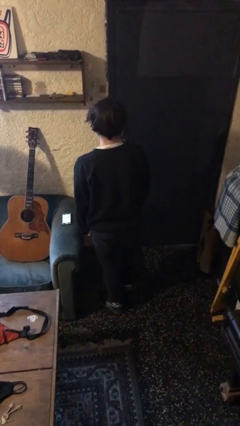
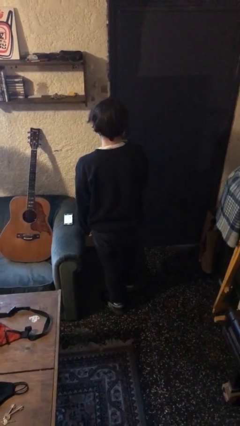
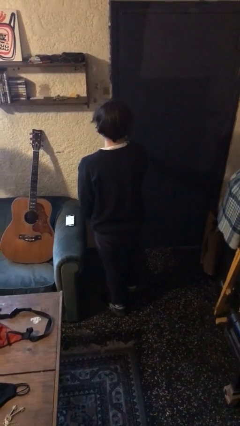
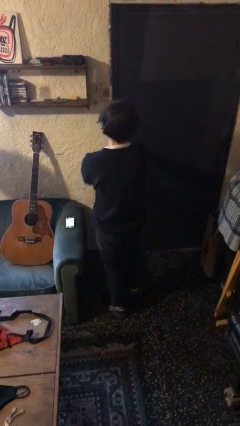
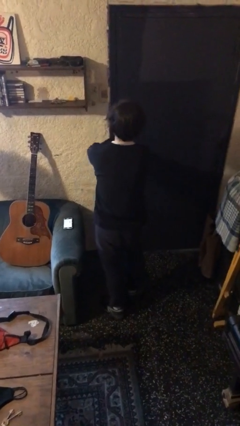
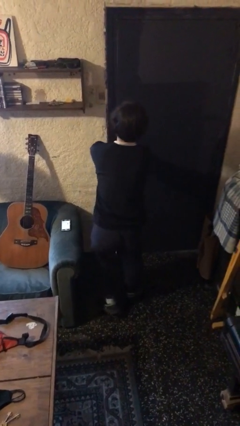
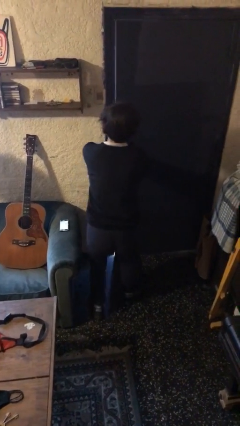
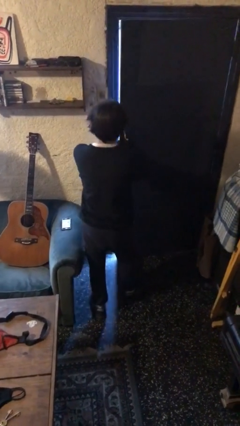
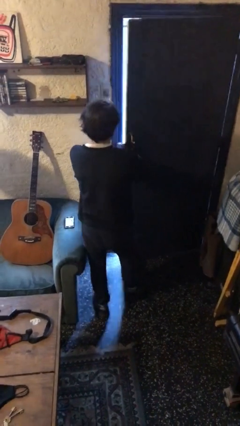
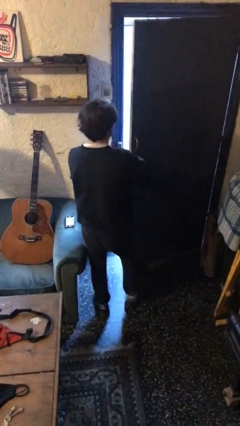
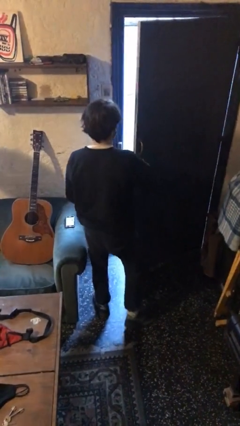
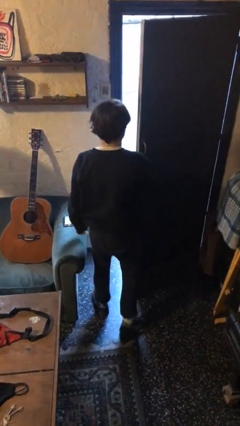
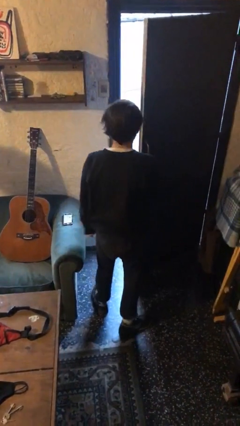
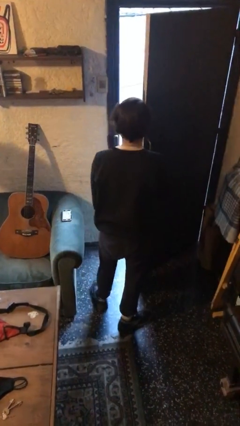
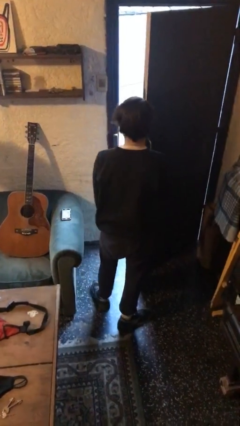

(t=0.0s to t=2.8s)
person opens facility door

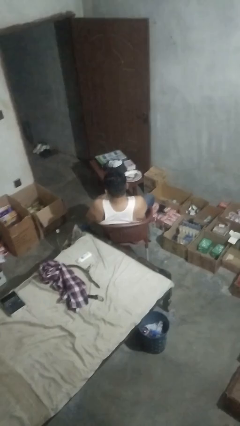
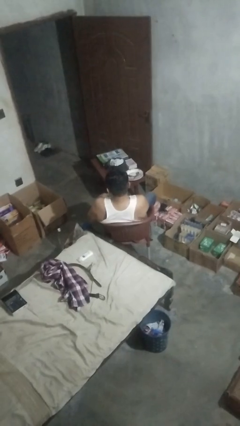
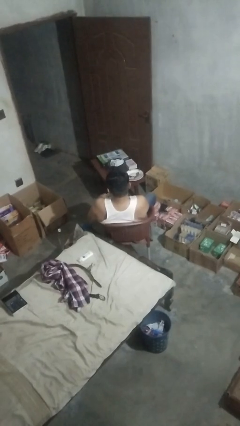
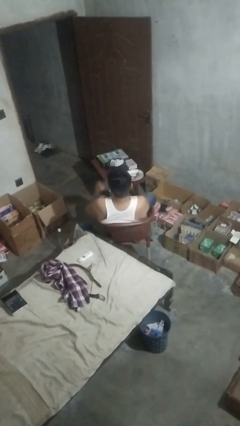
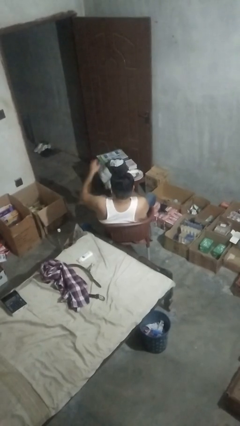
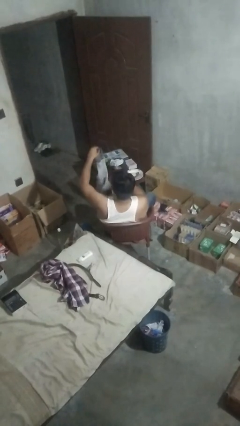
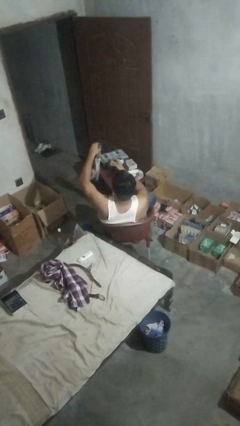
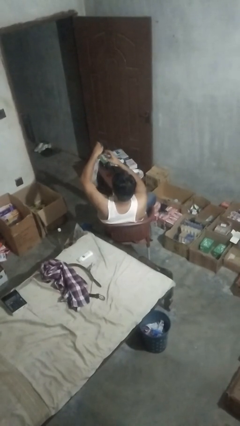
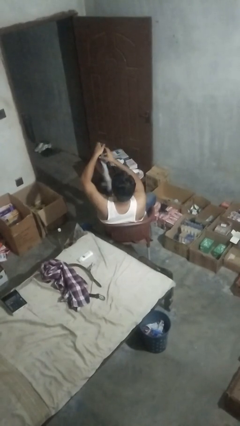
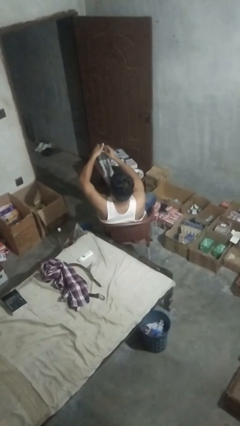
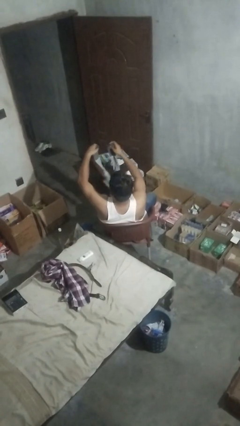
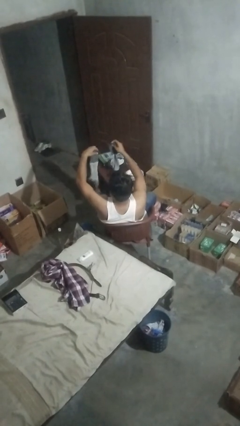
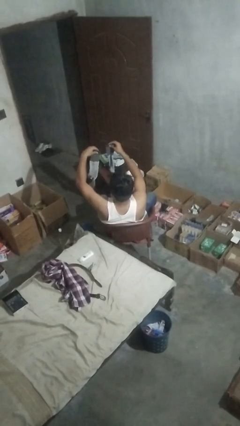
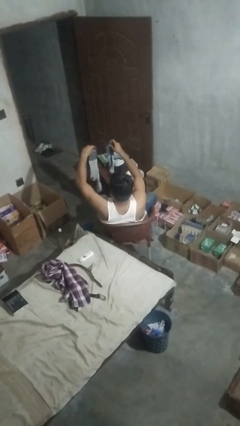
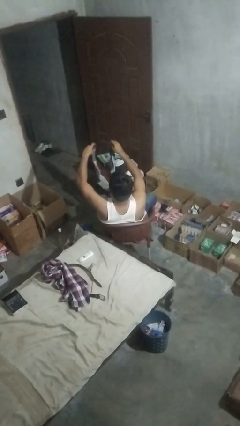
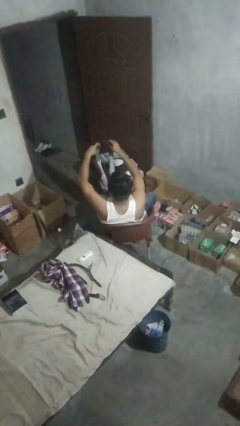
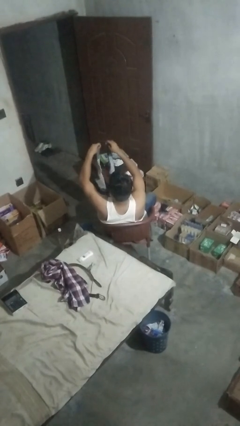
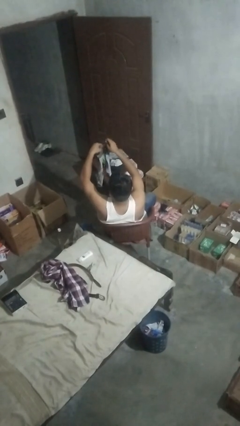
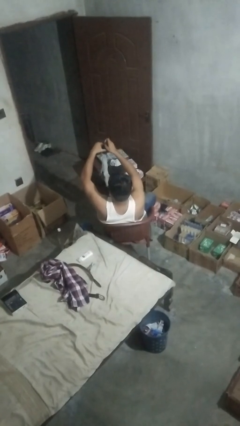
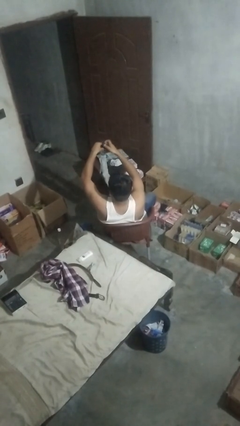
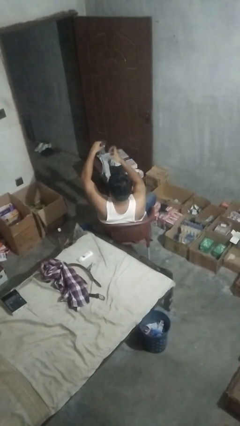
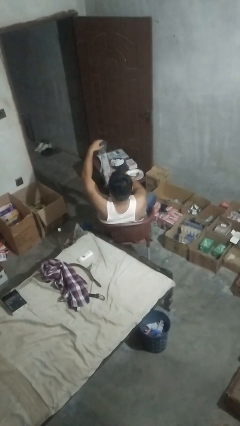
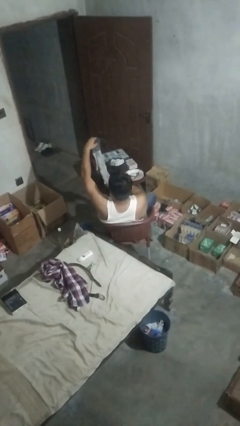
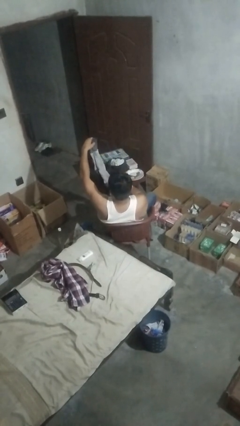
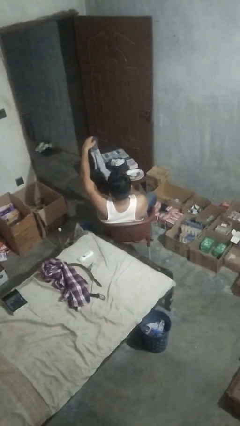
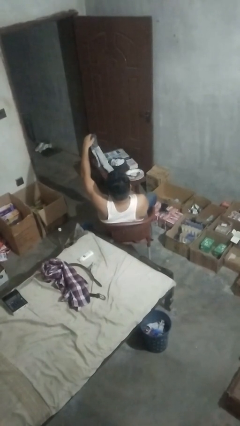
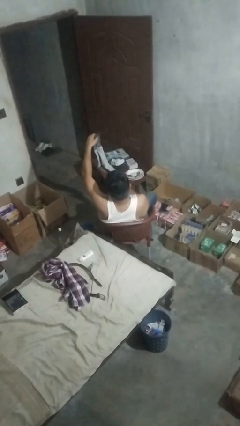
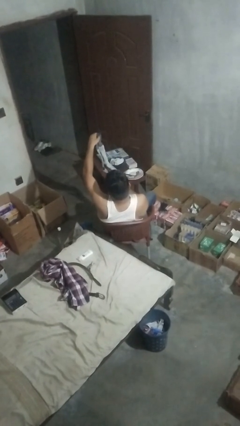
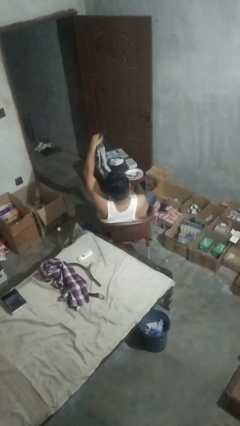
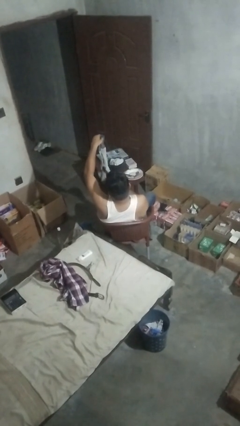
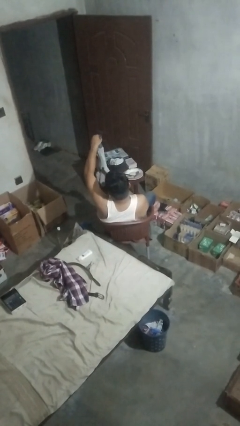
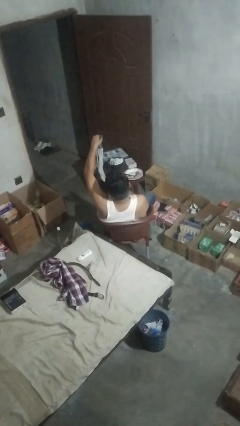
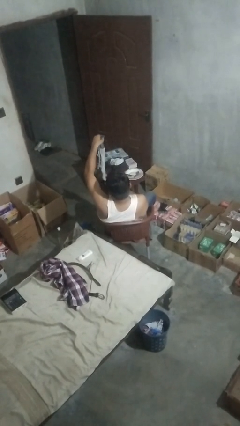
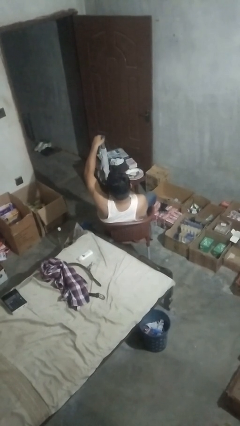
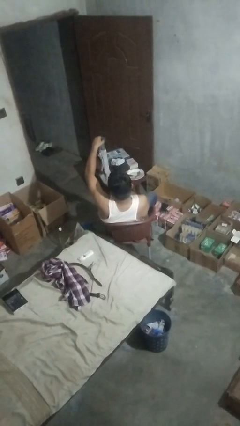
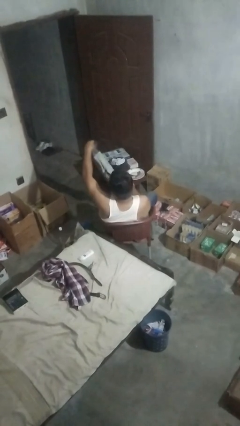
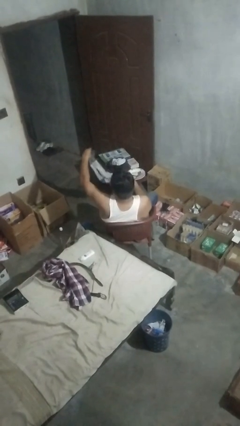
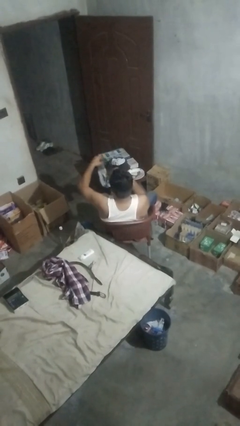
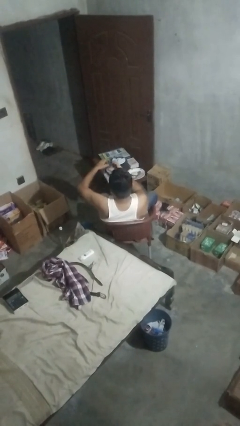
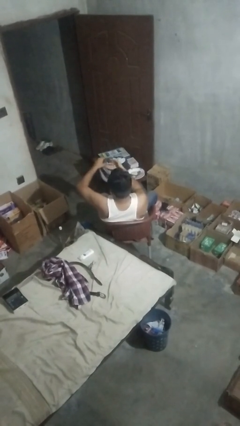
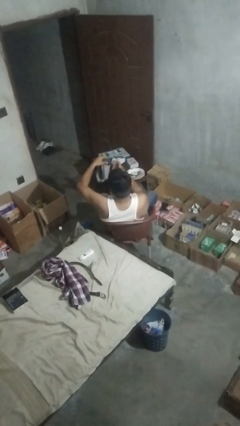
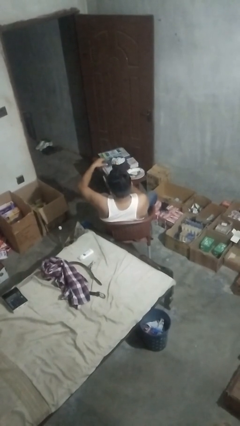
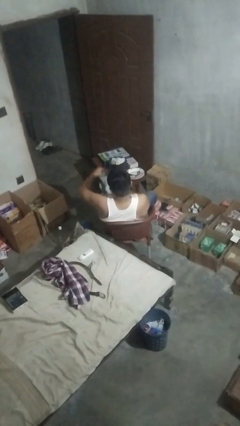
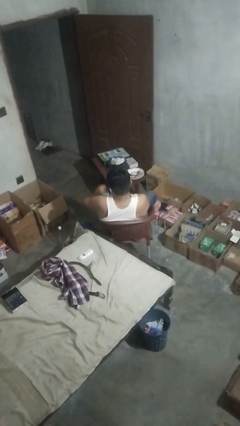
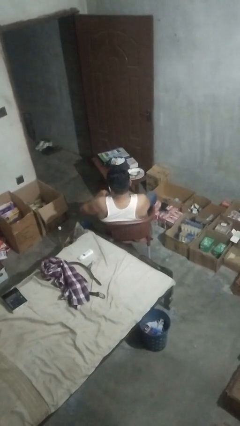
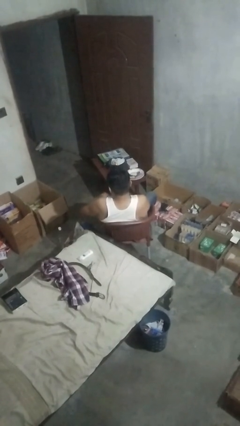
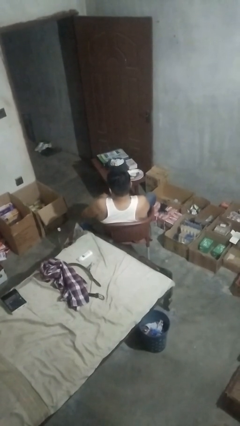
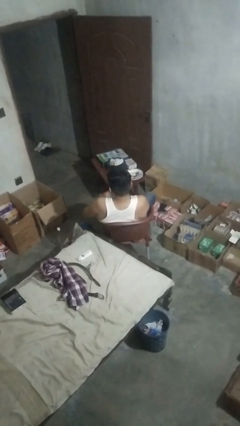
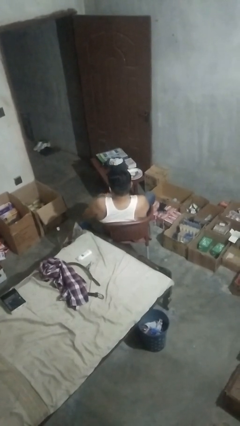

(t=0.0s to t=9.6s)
person folds socks

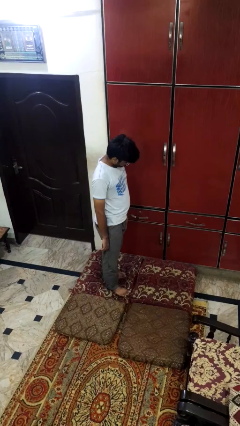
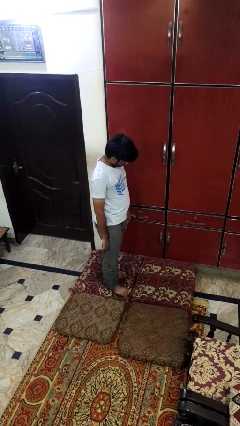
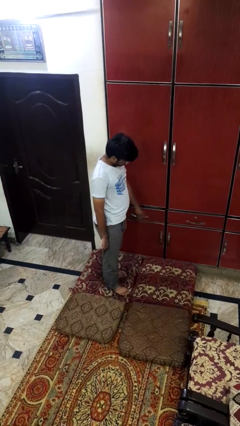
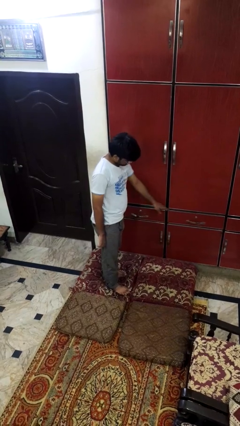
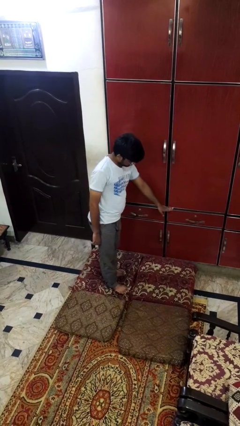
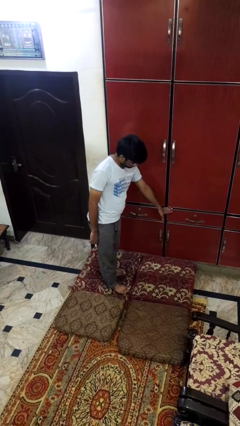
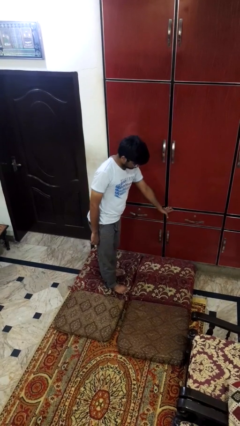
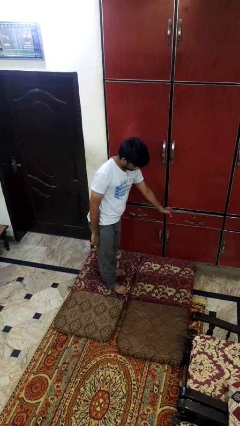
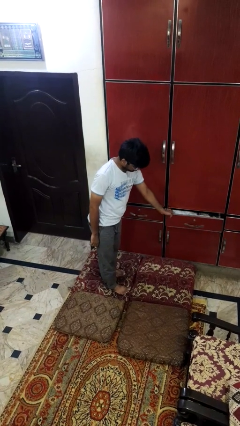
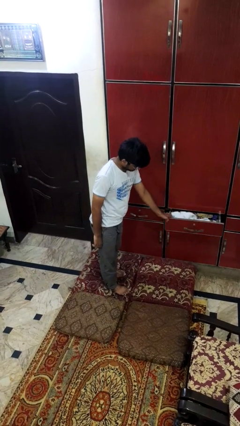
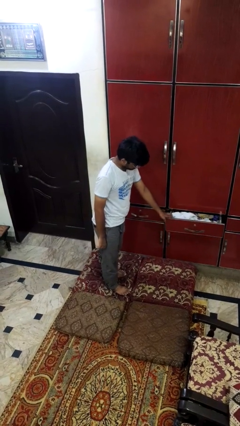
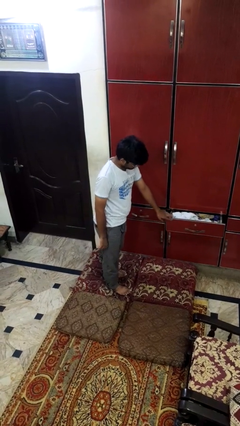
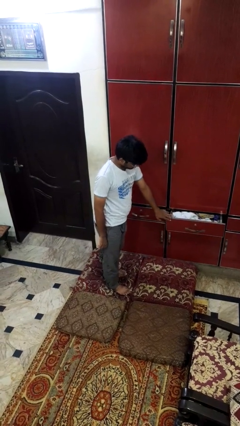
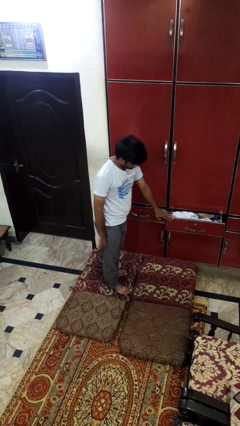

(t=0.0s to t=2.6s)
person opens dresser drawer

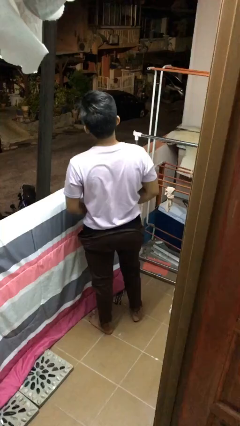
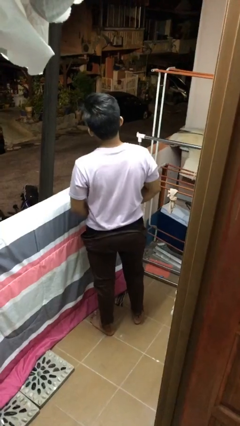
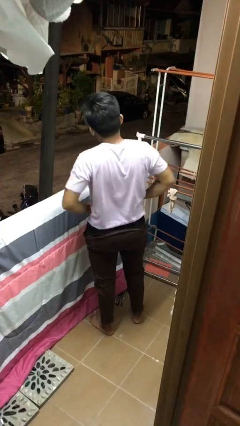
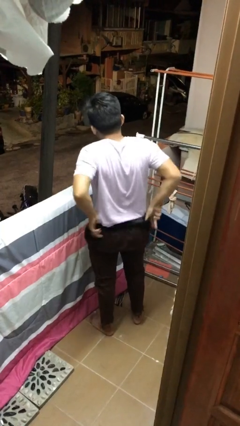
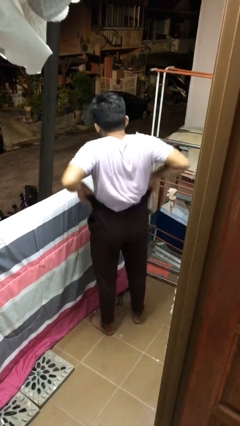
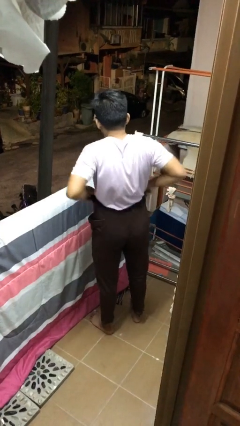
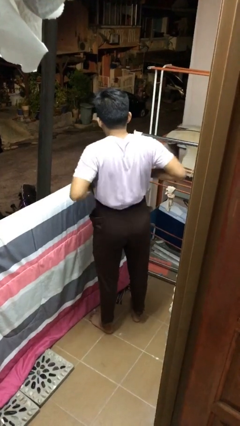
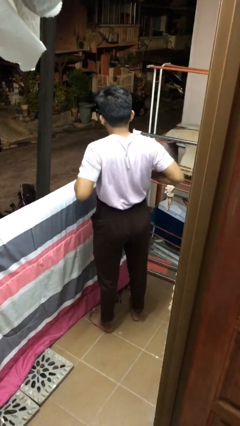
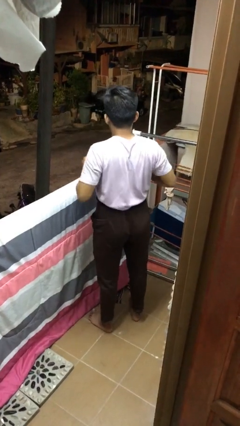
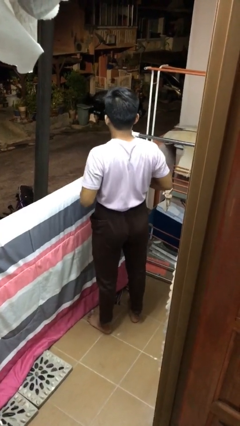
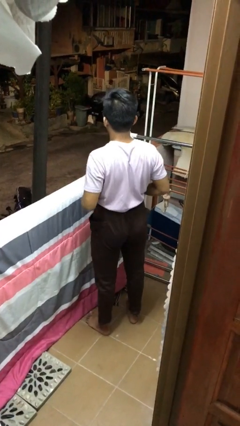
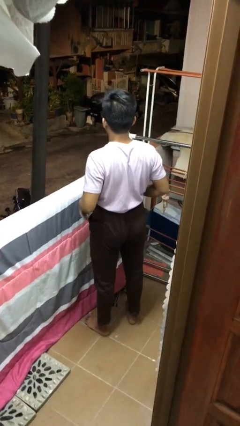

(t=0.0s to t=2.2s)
person hikes up pants

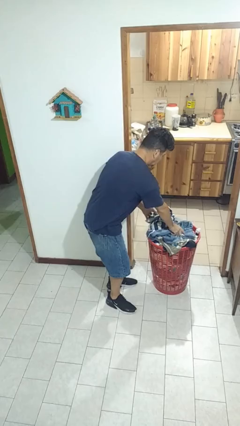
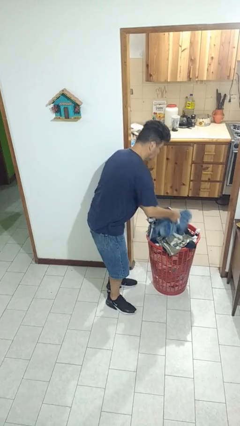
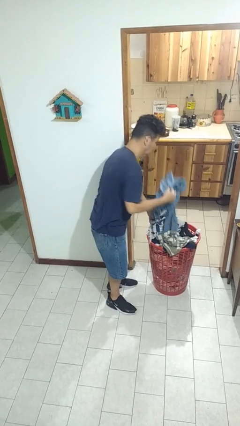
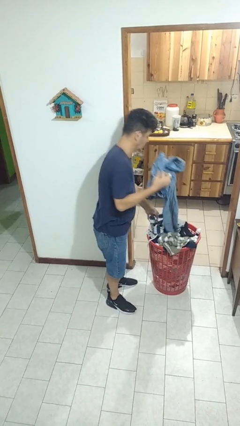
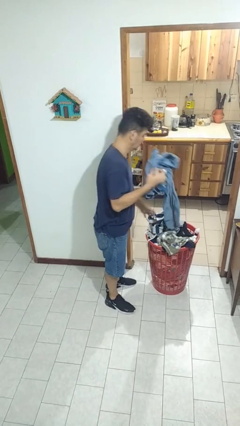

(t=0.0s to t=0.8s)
person takes object from basket
